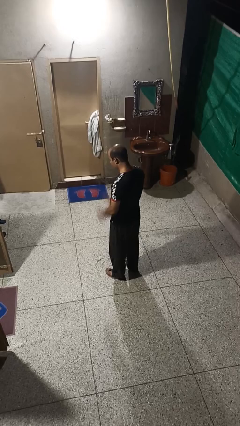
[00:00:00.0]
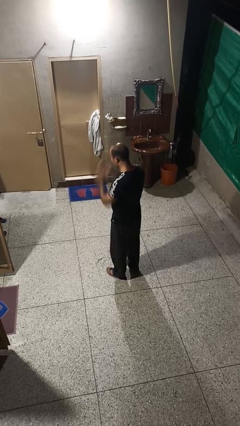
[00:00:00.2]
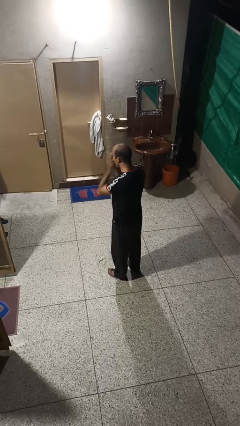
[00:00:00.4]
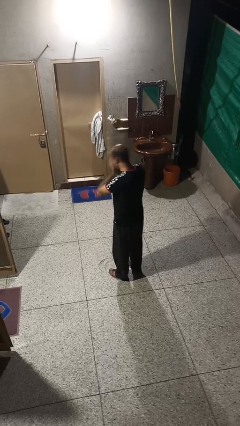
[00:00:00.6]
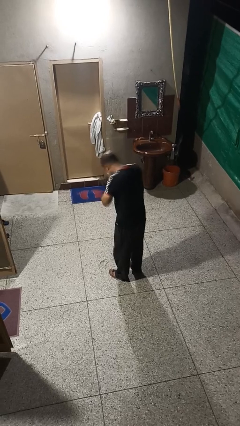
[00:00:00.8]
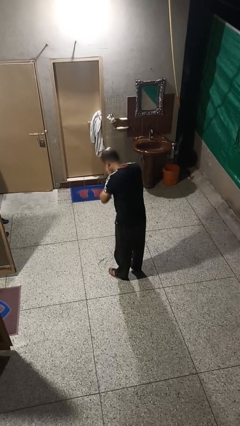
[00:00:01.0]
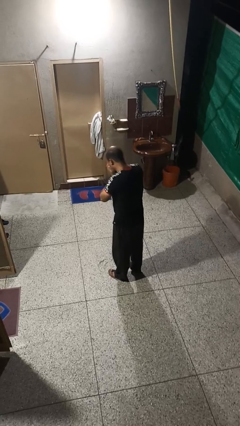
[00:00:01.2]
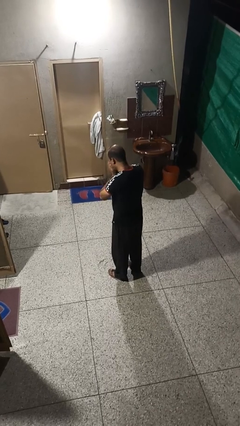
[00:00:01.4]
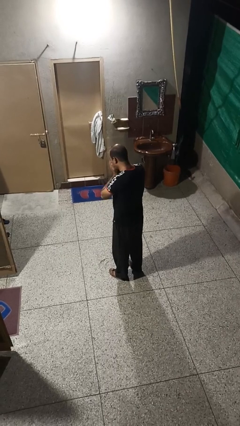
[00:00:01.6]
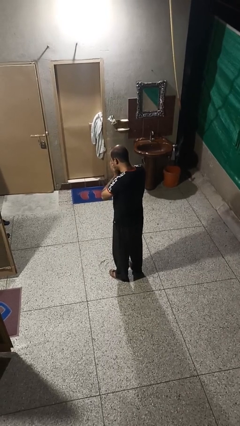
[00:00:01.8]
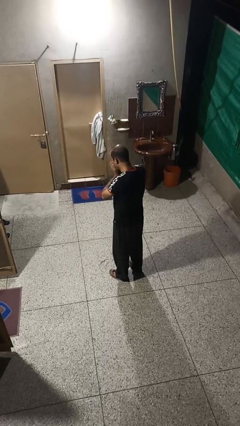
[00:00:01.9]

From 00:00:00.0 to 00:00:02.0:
person sneezes into hand

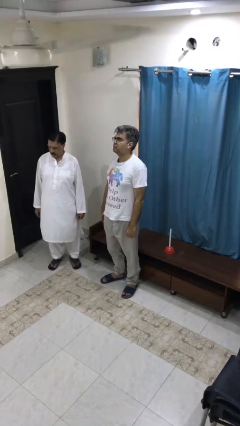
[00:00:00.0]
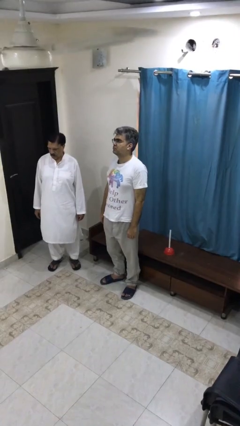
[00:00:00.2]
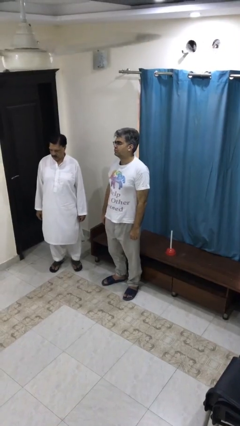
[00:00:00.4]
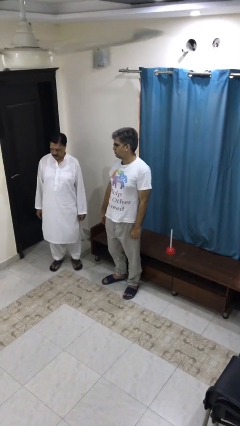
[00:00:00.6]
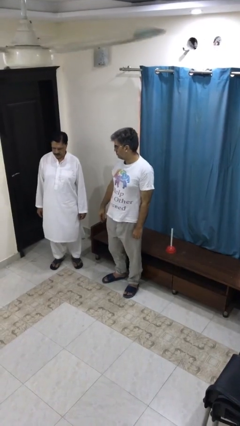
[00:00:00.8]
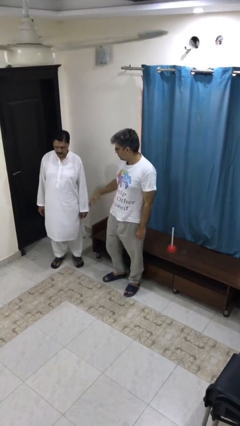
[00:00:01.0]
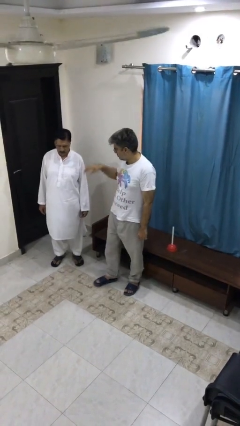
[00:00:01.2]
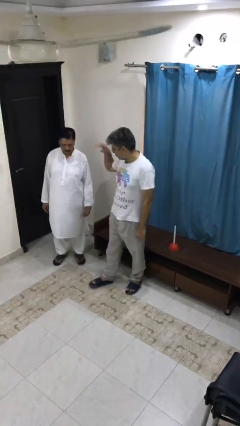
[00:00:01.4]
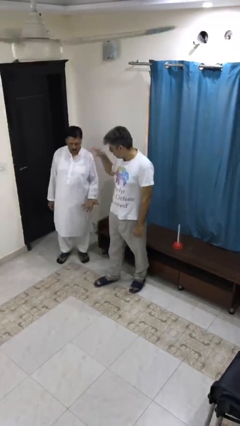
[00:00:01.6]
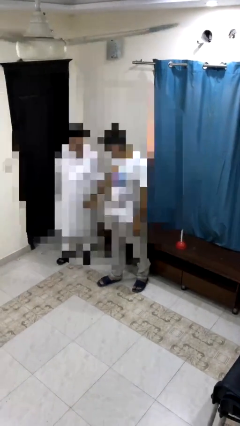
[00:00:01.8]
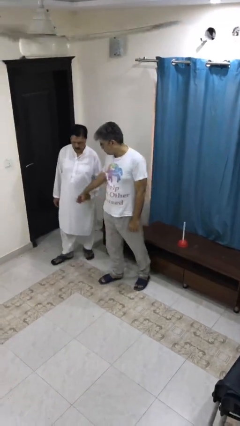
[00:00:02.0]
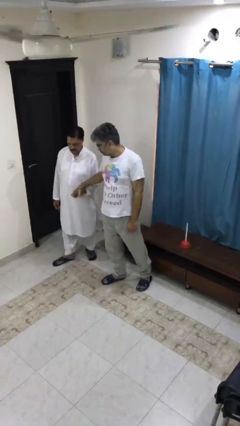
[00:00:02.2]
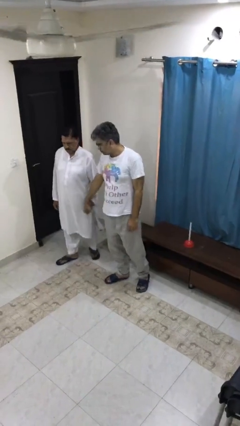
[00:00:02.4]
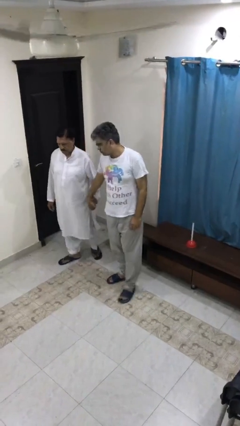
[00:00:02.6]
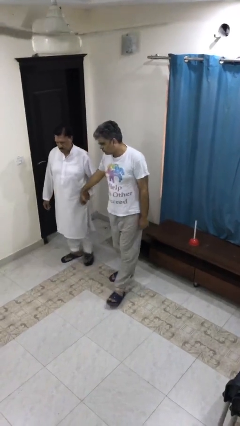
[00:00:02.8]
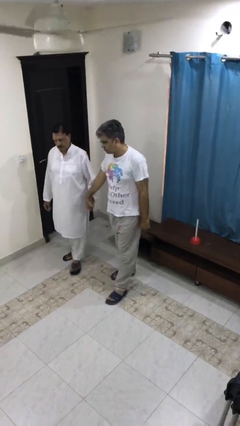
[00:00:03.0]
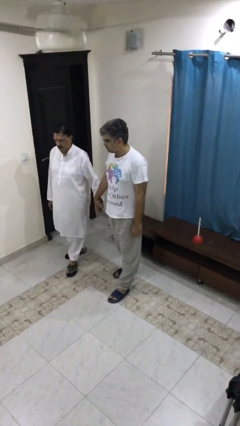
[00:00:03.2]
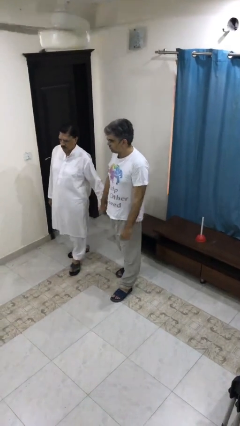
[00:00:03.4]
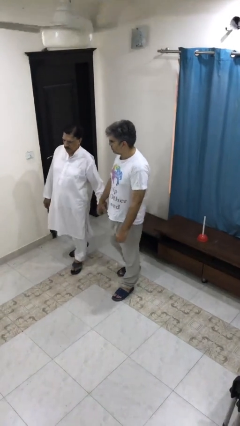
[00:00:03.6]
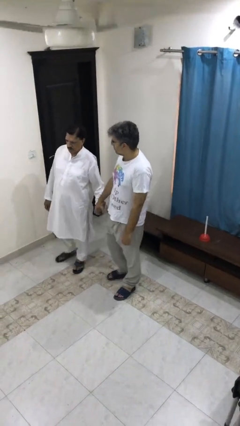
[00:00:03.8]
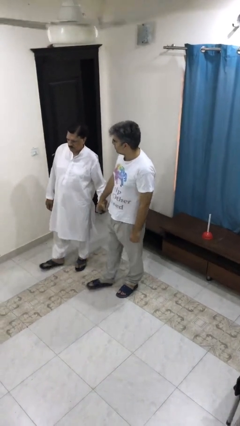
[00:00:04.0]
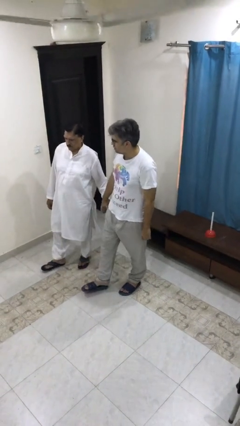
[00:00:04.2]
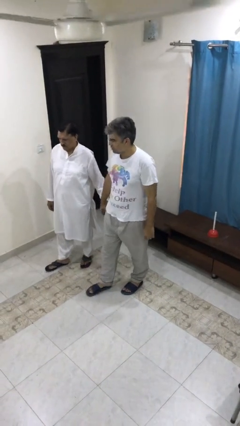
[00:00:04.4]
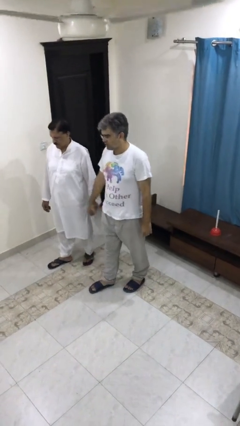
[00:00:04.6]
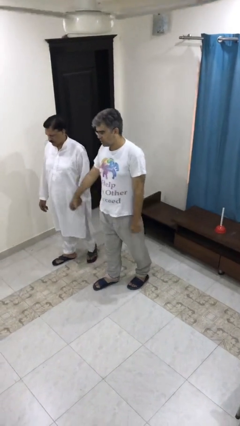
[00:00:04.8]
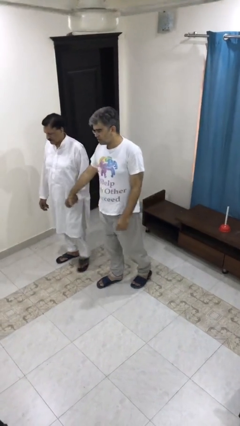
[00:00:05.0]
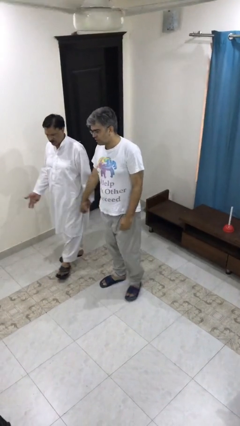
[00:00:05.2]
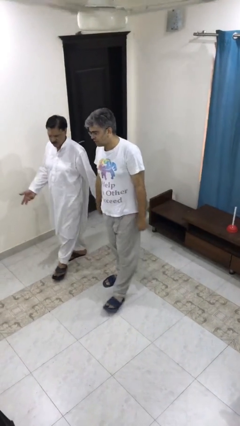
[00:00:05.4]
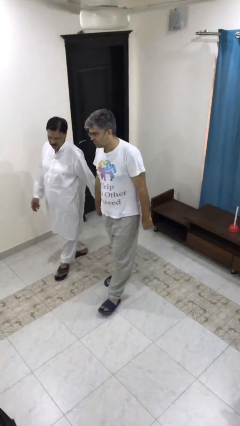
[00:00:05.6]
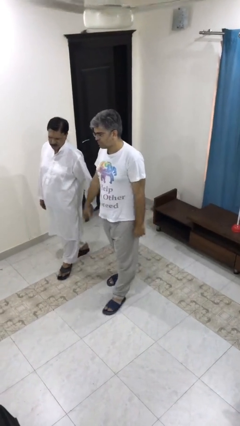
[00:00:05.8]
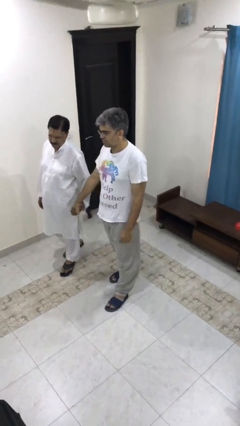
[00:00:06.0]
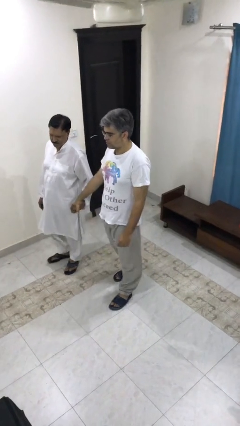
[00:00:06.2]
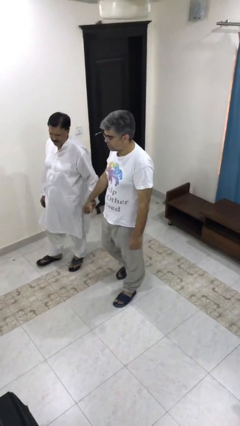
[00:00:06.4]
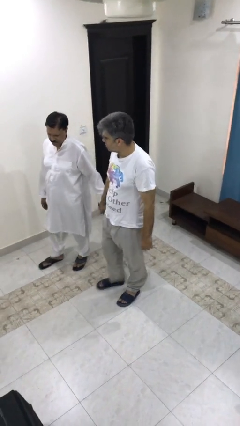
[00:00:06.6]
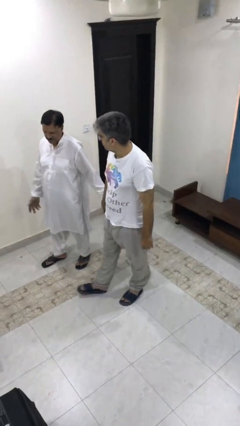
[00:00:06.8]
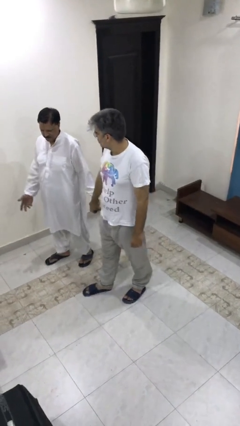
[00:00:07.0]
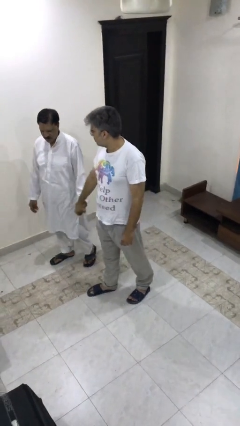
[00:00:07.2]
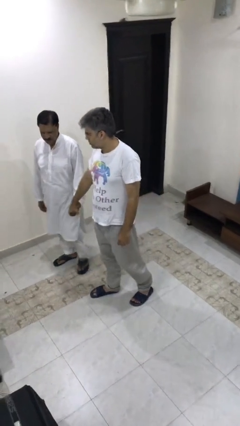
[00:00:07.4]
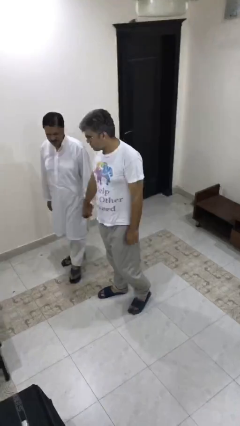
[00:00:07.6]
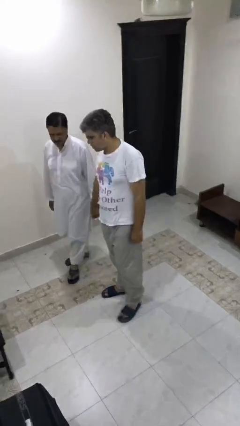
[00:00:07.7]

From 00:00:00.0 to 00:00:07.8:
person holds hand

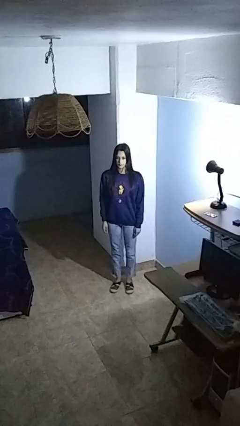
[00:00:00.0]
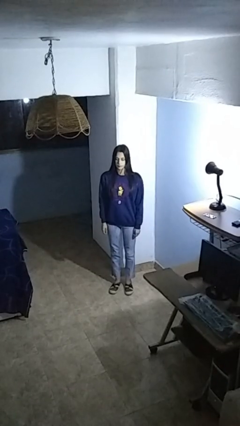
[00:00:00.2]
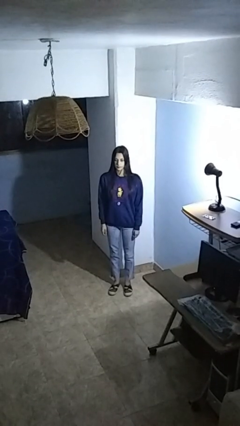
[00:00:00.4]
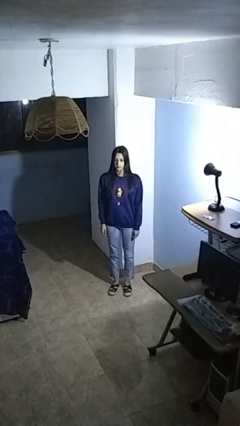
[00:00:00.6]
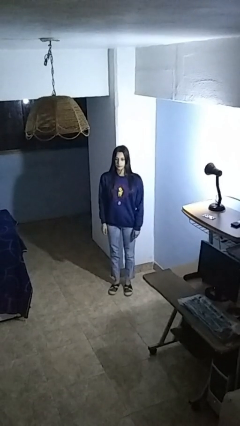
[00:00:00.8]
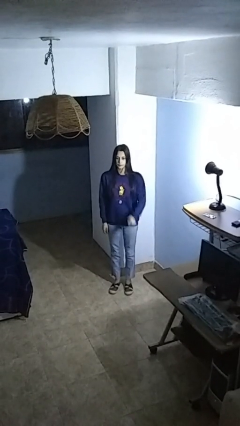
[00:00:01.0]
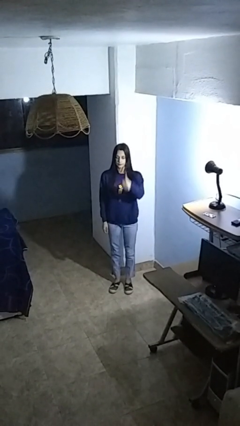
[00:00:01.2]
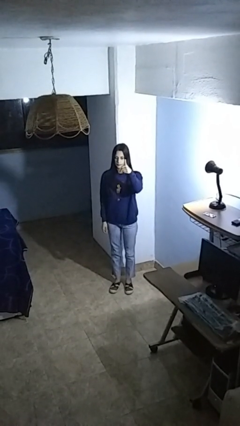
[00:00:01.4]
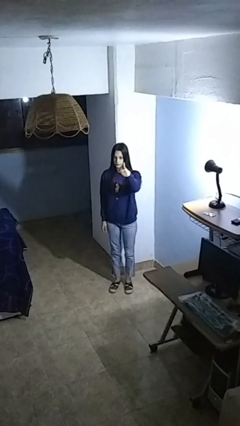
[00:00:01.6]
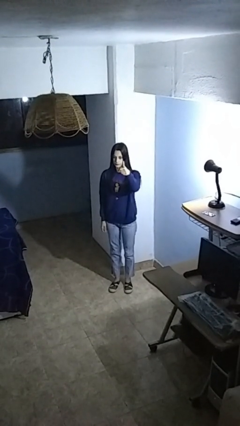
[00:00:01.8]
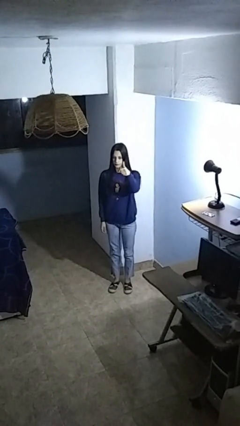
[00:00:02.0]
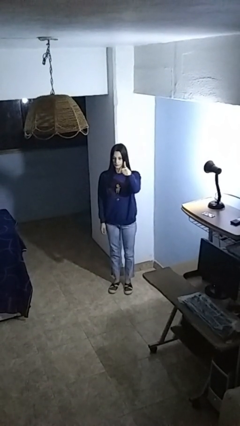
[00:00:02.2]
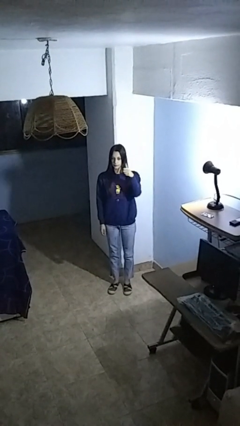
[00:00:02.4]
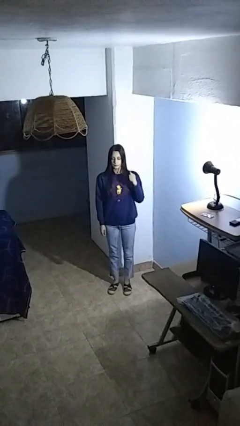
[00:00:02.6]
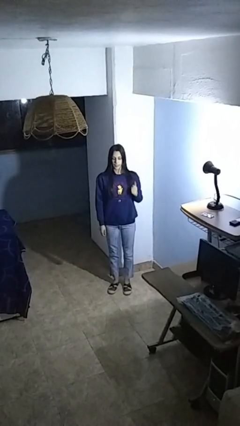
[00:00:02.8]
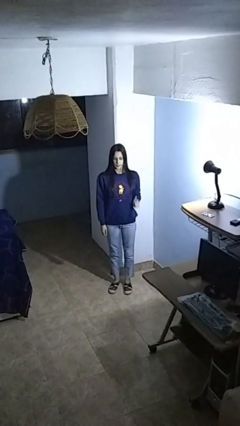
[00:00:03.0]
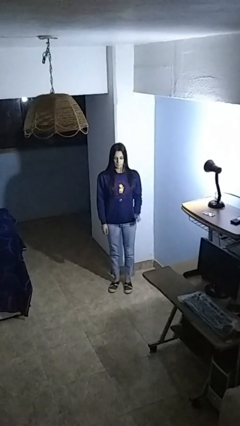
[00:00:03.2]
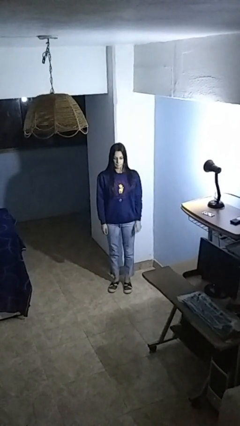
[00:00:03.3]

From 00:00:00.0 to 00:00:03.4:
person gestures thumbs up

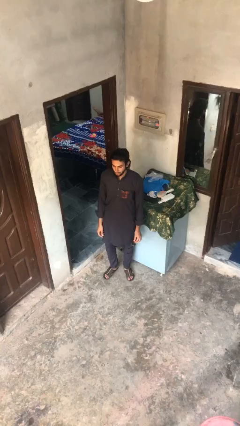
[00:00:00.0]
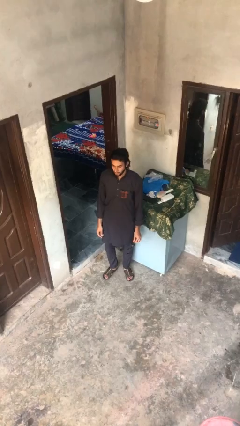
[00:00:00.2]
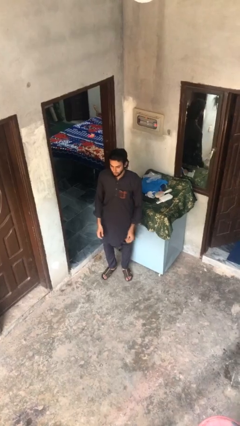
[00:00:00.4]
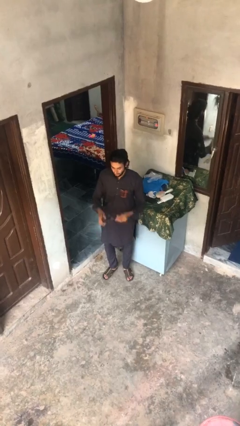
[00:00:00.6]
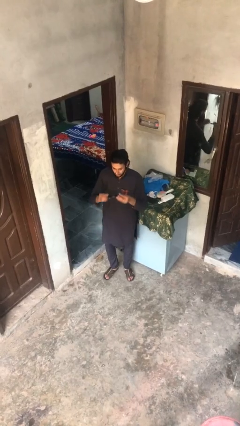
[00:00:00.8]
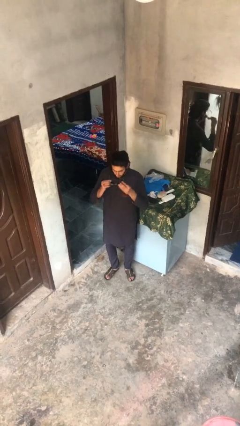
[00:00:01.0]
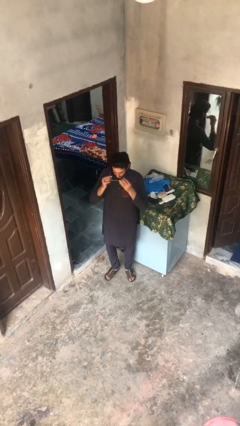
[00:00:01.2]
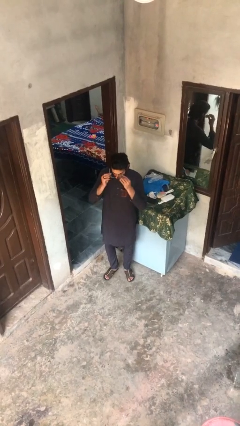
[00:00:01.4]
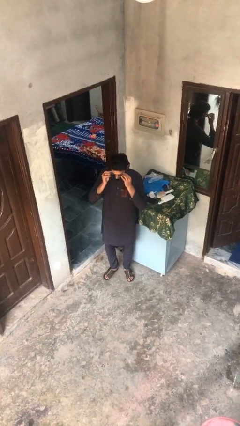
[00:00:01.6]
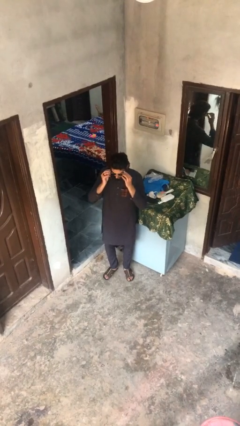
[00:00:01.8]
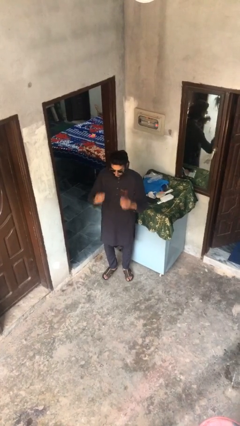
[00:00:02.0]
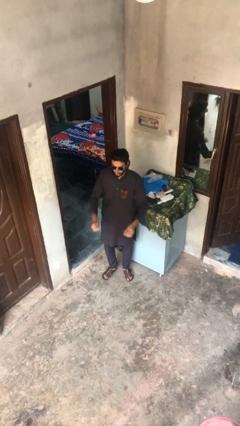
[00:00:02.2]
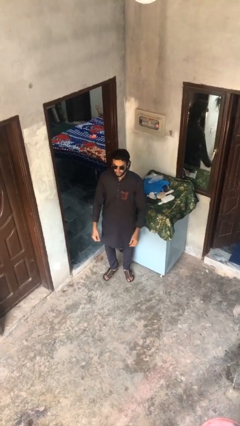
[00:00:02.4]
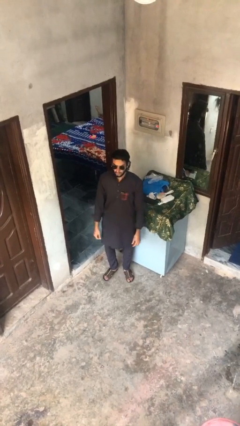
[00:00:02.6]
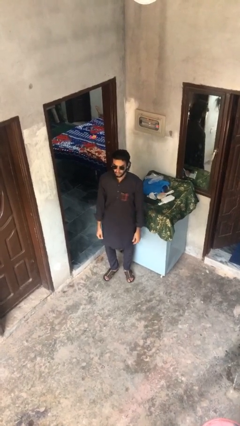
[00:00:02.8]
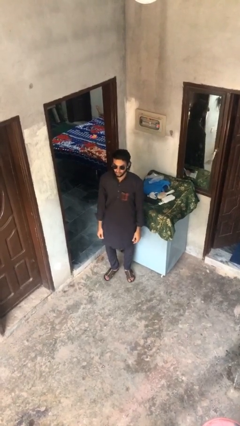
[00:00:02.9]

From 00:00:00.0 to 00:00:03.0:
person puts on sunglasses

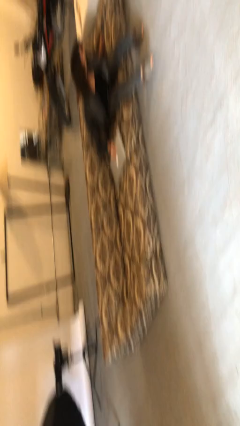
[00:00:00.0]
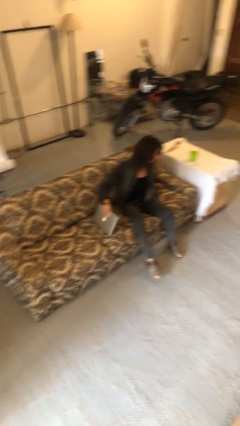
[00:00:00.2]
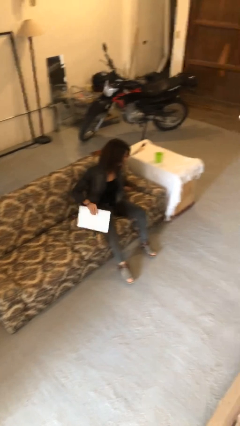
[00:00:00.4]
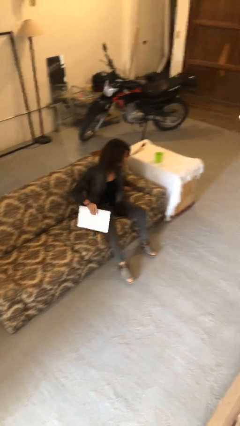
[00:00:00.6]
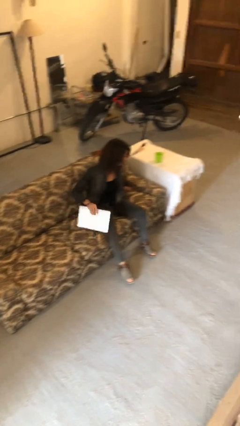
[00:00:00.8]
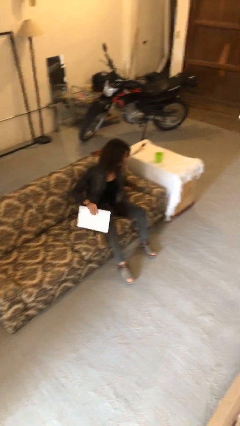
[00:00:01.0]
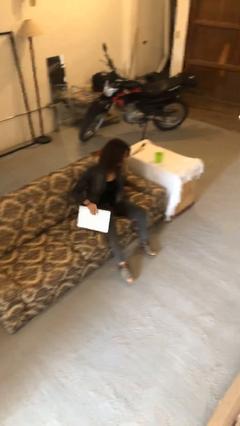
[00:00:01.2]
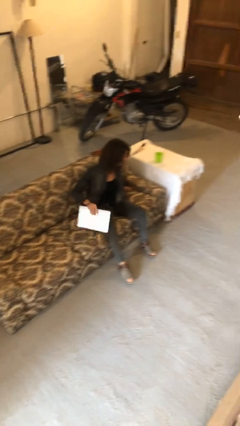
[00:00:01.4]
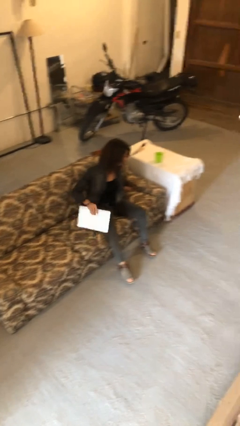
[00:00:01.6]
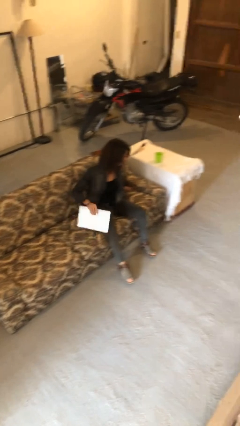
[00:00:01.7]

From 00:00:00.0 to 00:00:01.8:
person opens laptop
